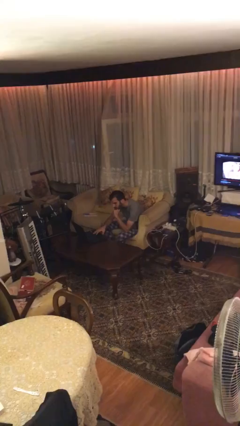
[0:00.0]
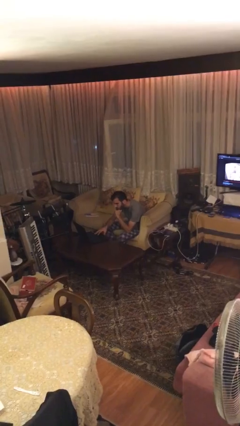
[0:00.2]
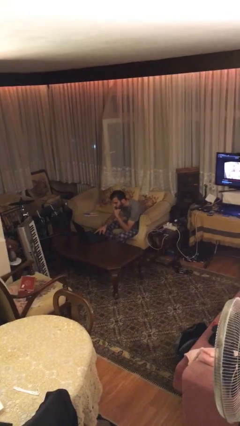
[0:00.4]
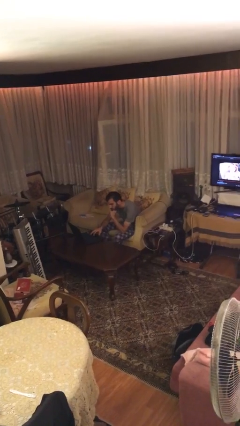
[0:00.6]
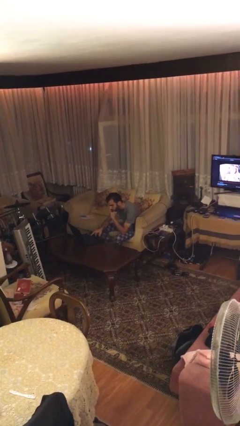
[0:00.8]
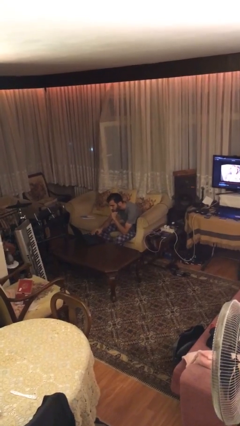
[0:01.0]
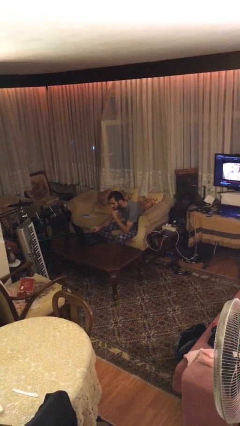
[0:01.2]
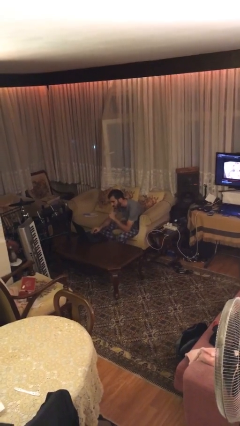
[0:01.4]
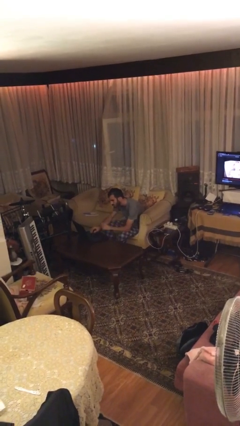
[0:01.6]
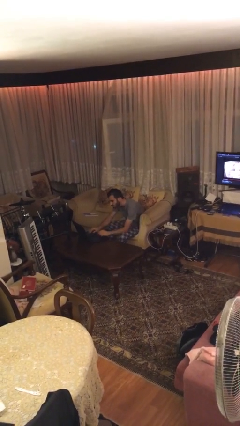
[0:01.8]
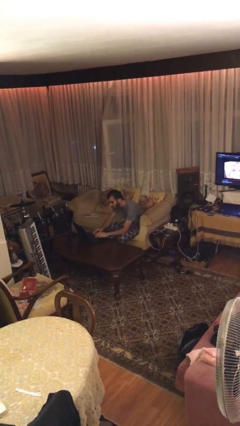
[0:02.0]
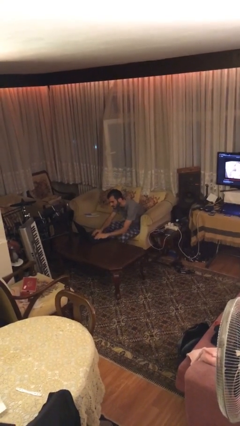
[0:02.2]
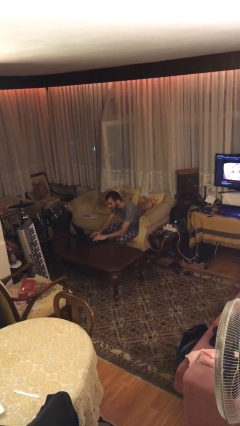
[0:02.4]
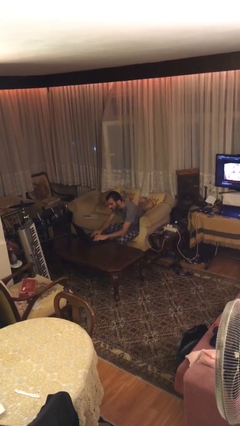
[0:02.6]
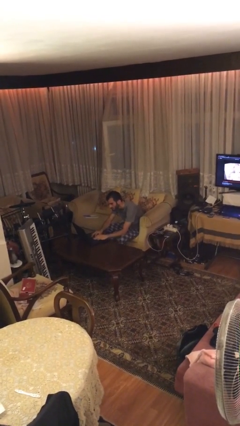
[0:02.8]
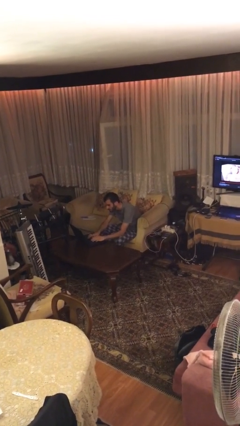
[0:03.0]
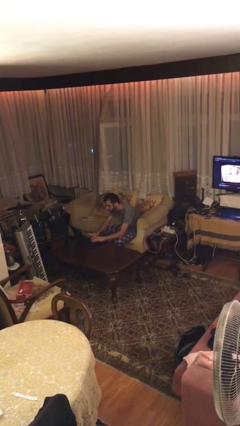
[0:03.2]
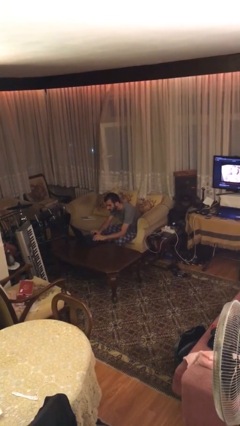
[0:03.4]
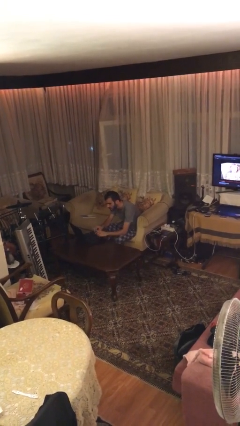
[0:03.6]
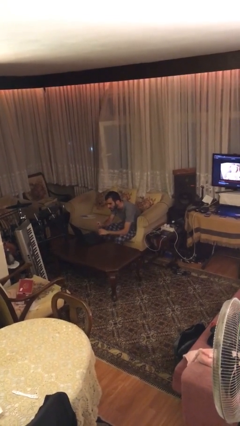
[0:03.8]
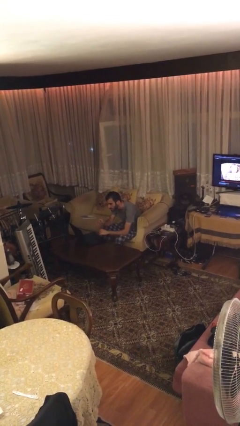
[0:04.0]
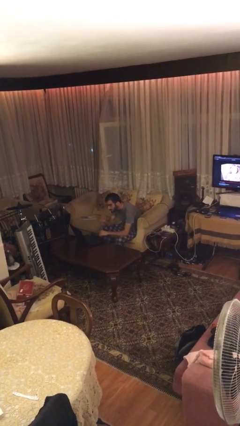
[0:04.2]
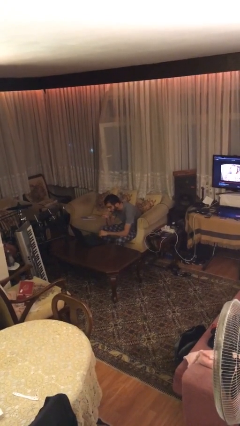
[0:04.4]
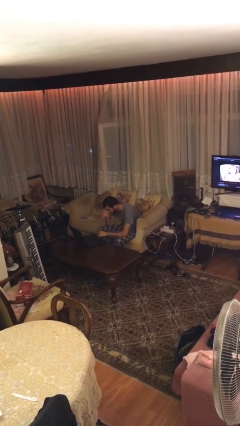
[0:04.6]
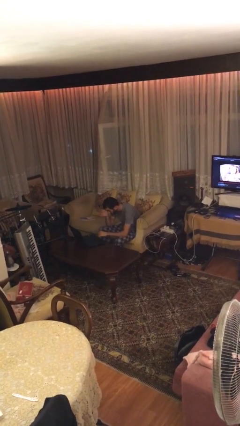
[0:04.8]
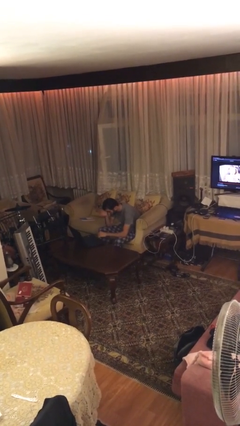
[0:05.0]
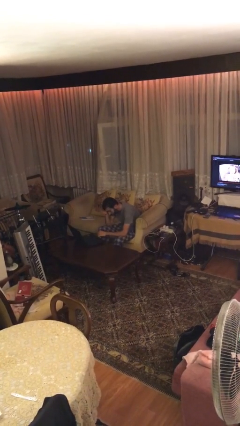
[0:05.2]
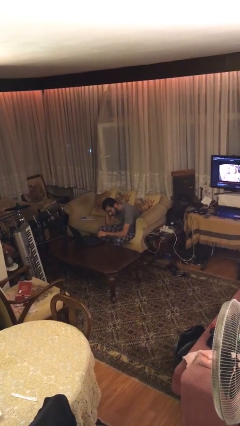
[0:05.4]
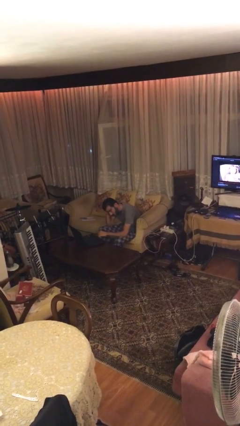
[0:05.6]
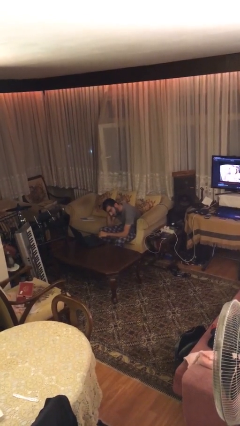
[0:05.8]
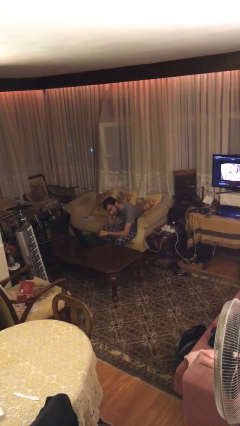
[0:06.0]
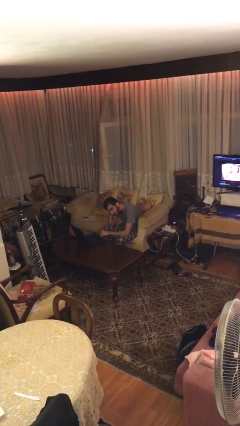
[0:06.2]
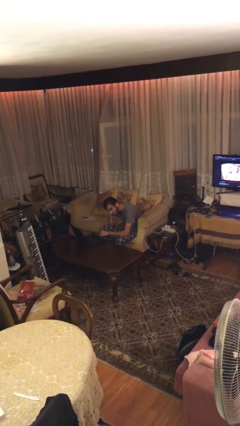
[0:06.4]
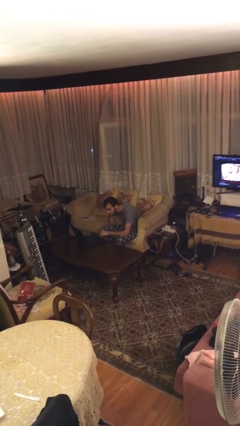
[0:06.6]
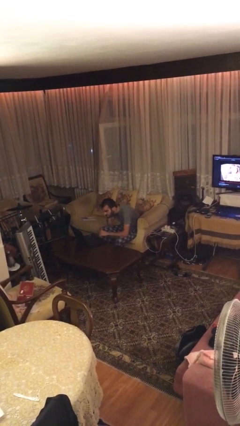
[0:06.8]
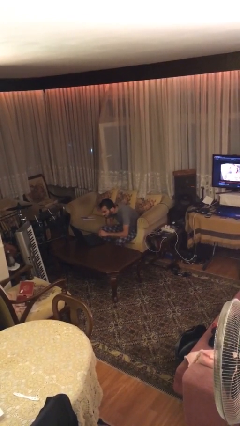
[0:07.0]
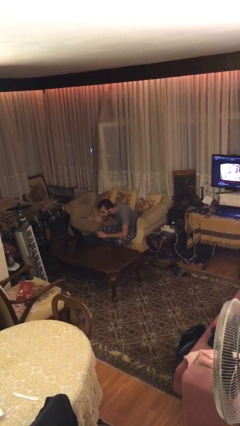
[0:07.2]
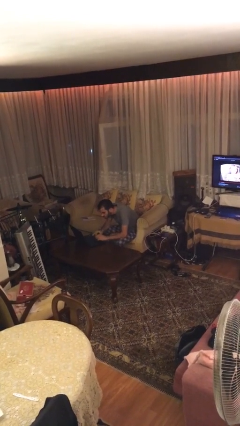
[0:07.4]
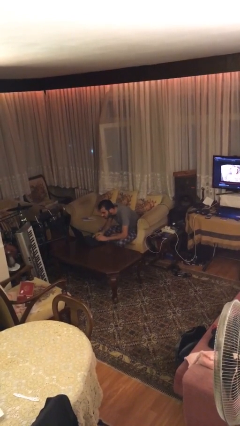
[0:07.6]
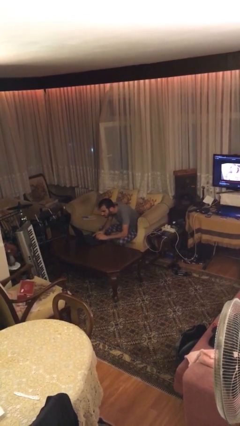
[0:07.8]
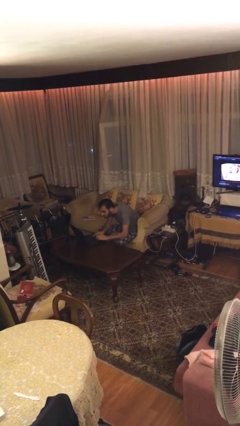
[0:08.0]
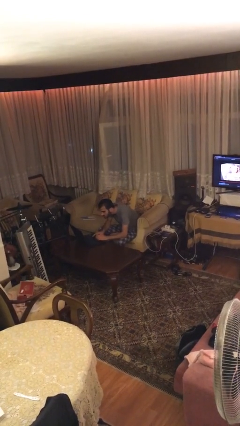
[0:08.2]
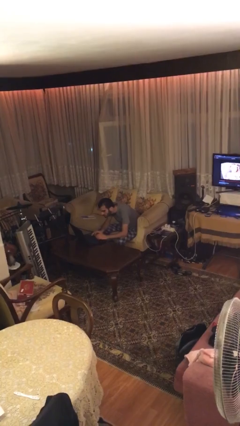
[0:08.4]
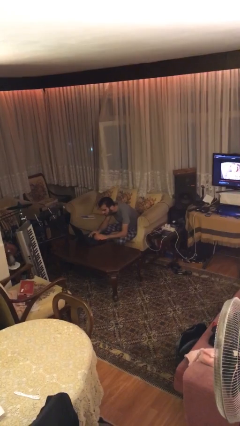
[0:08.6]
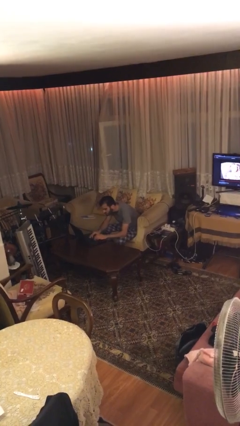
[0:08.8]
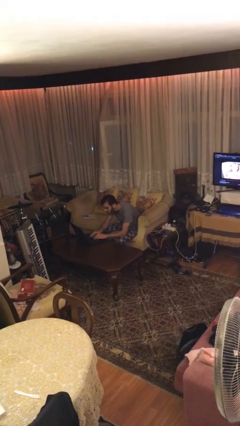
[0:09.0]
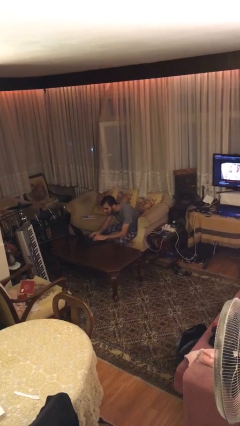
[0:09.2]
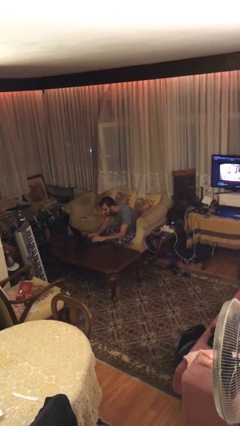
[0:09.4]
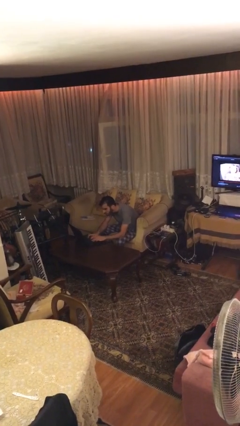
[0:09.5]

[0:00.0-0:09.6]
person interacts with laptop

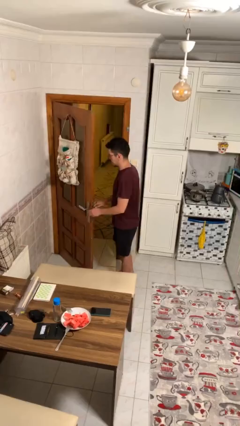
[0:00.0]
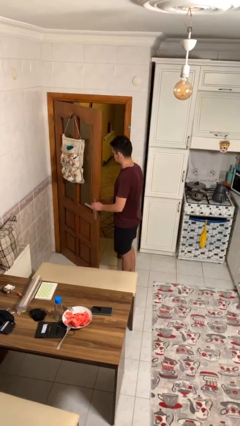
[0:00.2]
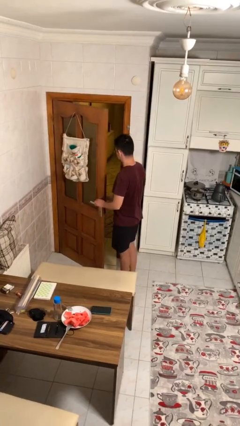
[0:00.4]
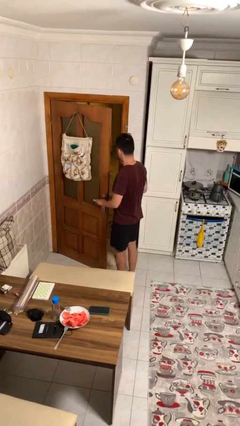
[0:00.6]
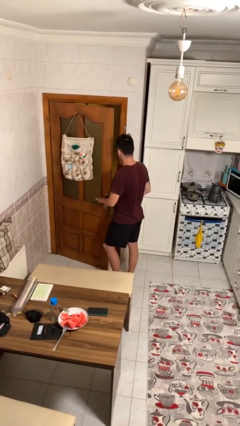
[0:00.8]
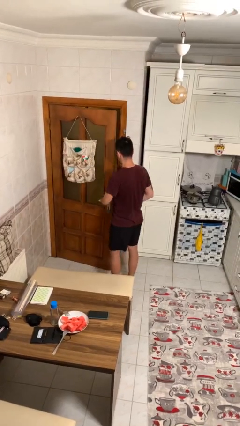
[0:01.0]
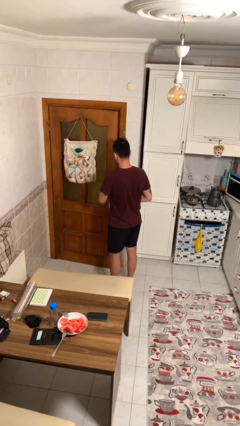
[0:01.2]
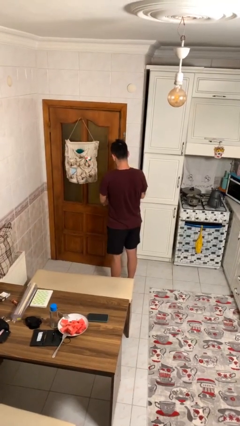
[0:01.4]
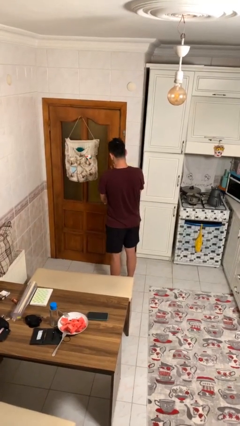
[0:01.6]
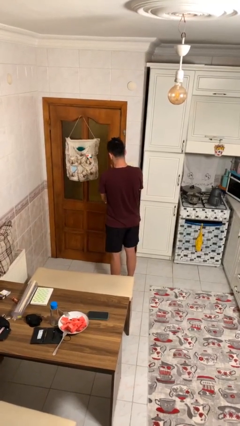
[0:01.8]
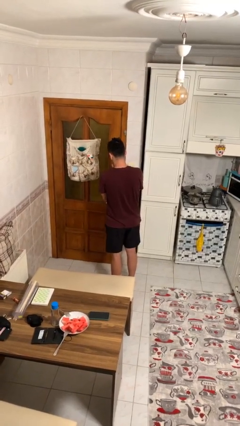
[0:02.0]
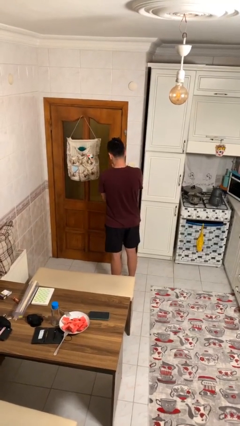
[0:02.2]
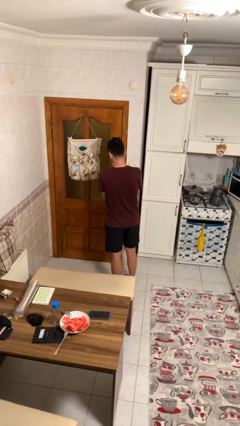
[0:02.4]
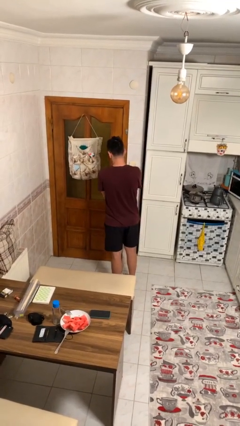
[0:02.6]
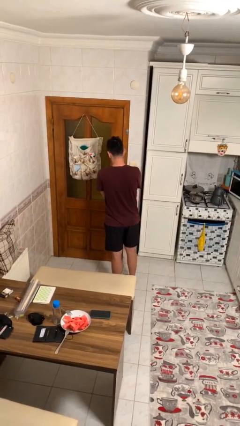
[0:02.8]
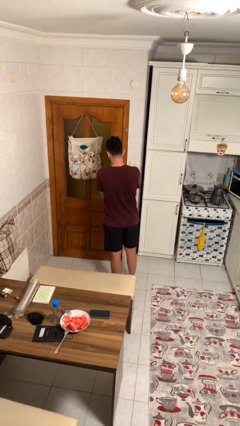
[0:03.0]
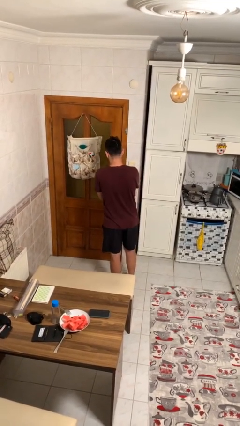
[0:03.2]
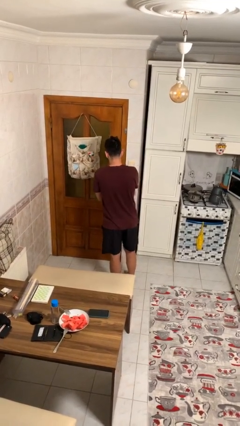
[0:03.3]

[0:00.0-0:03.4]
person closes facility door

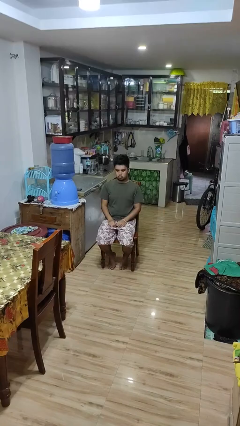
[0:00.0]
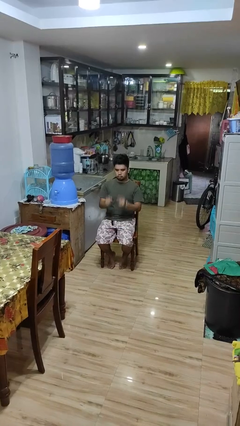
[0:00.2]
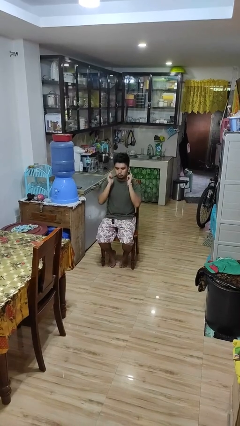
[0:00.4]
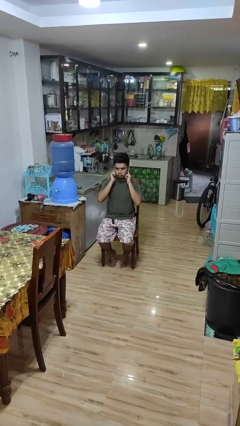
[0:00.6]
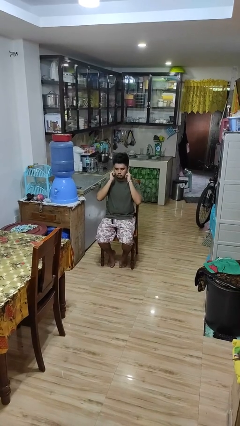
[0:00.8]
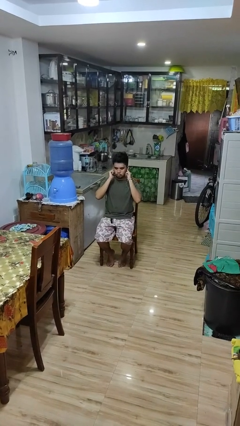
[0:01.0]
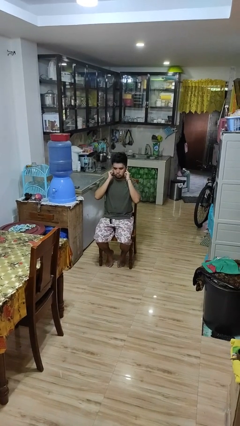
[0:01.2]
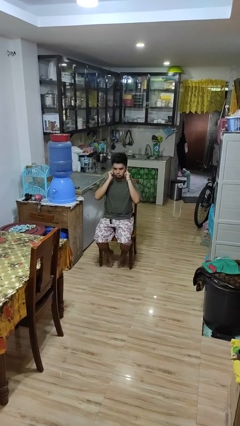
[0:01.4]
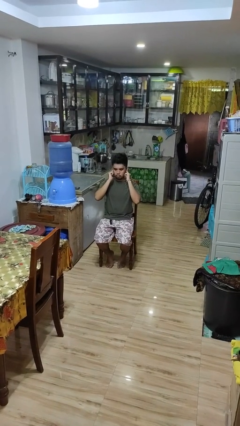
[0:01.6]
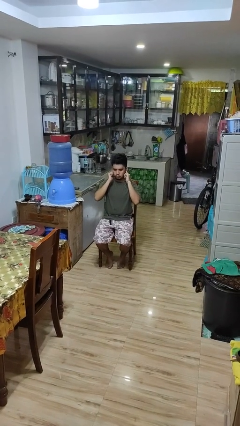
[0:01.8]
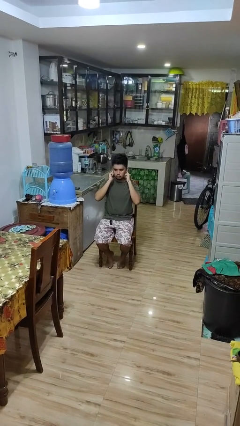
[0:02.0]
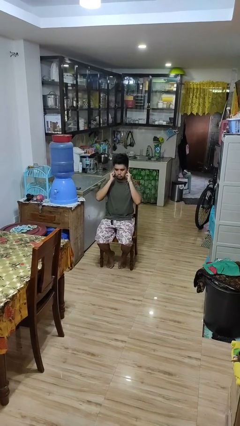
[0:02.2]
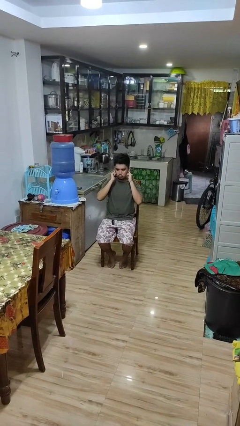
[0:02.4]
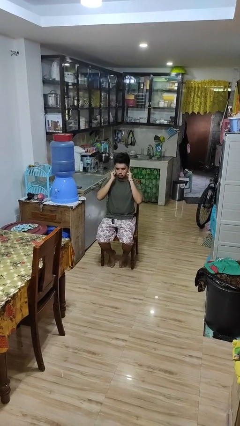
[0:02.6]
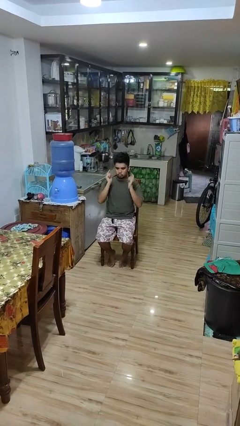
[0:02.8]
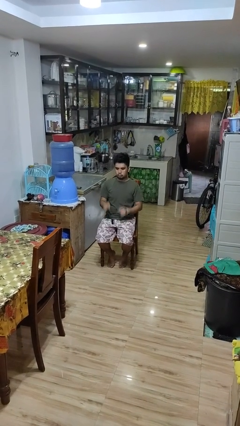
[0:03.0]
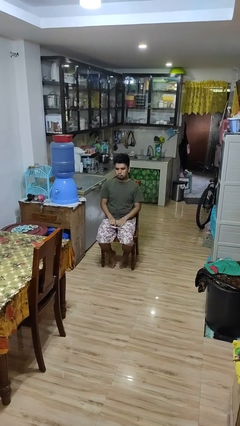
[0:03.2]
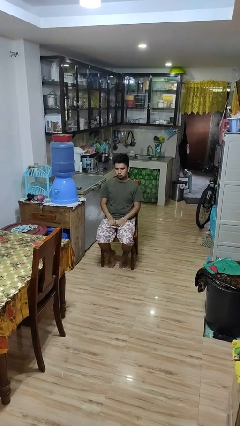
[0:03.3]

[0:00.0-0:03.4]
person puts fingers in ear

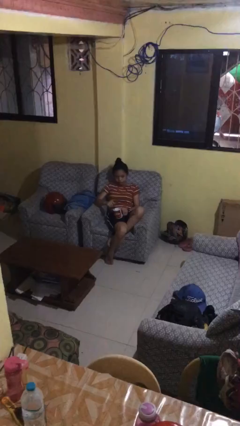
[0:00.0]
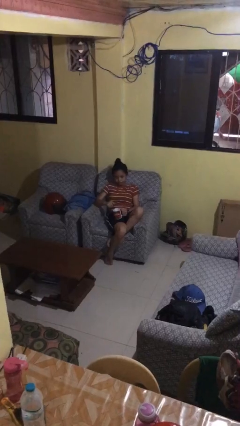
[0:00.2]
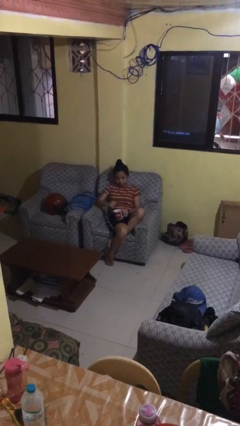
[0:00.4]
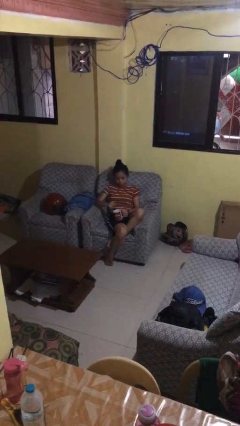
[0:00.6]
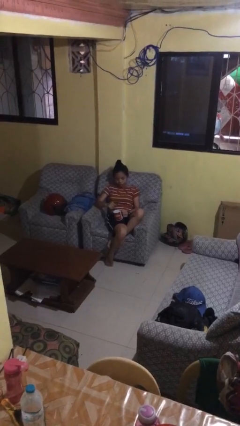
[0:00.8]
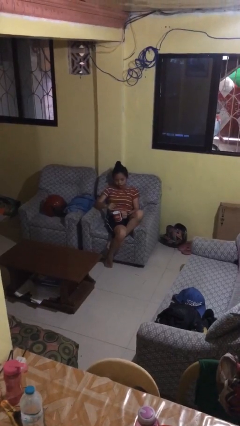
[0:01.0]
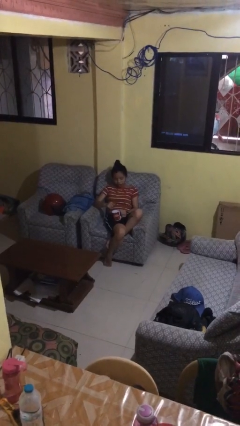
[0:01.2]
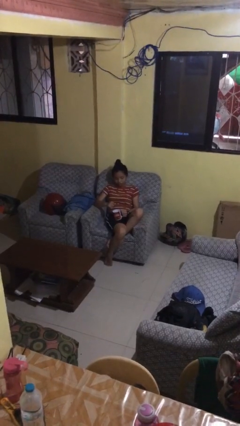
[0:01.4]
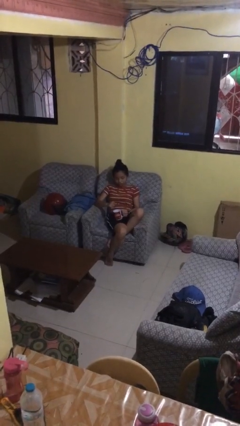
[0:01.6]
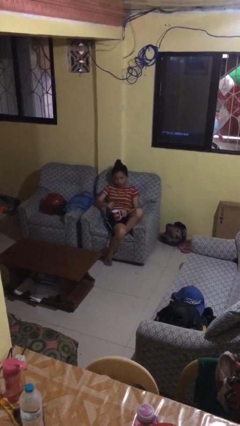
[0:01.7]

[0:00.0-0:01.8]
person stirs mug
